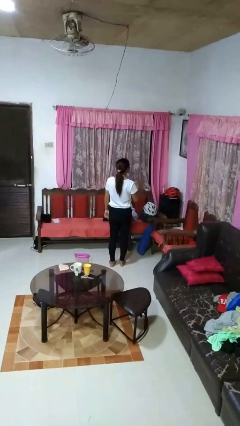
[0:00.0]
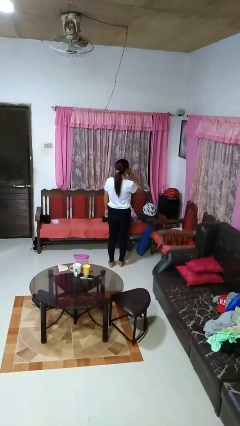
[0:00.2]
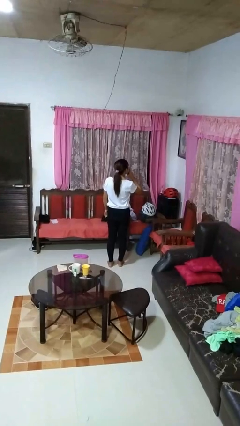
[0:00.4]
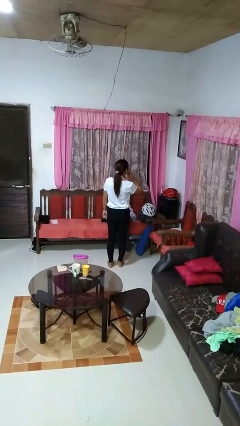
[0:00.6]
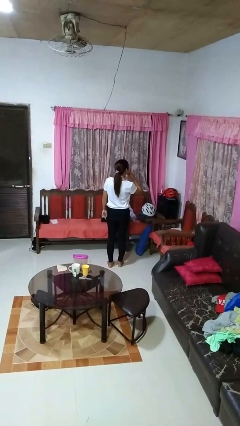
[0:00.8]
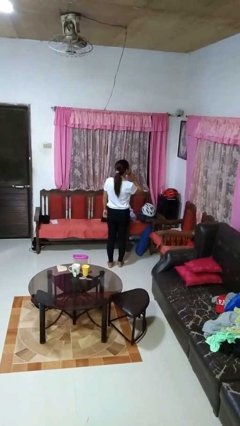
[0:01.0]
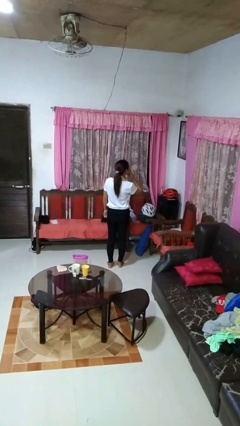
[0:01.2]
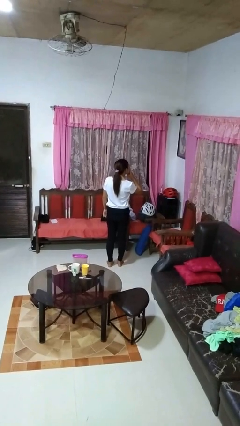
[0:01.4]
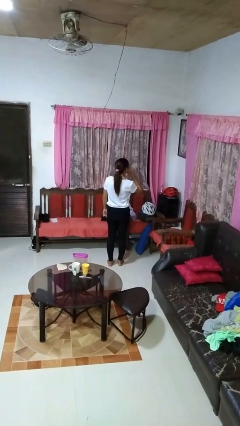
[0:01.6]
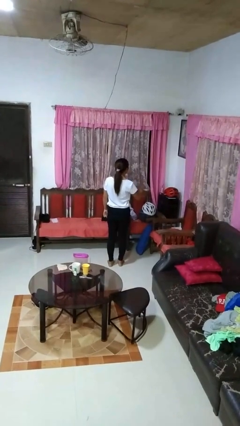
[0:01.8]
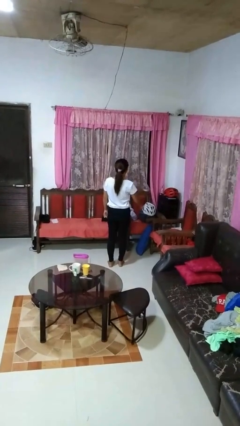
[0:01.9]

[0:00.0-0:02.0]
person gestures be quiet

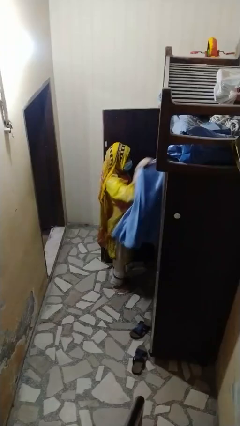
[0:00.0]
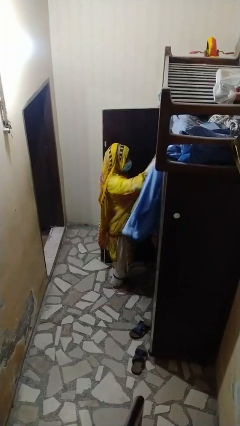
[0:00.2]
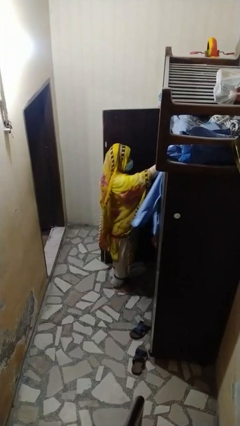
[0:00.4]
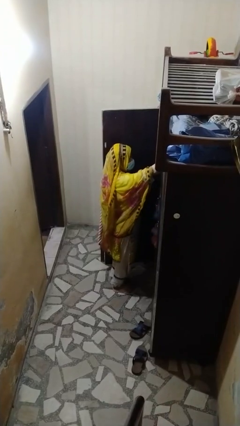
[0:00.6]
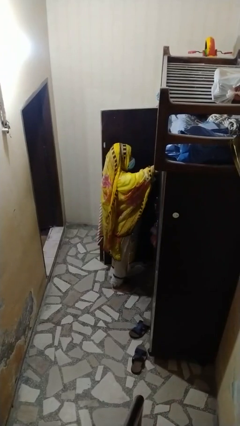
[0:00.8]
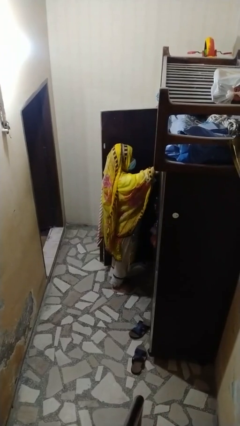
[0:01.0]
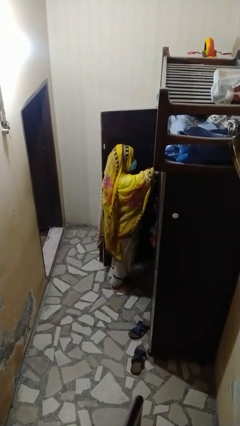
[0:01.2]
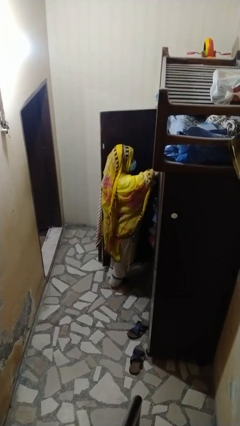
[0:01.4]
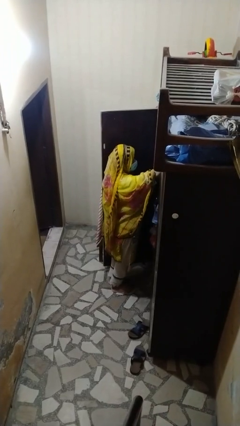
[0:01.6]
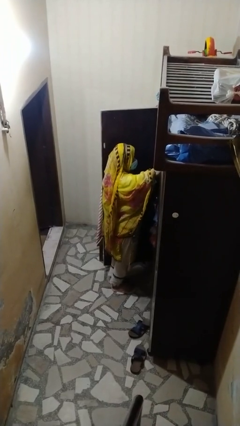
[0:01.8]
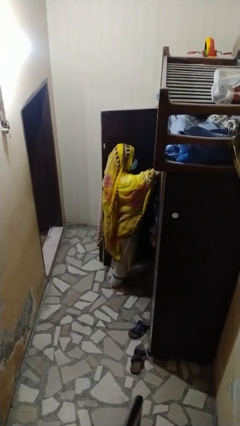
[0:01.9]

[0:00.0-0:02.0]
person puts clothes into closet

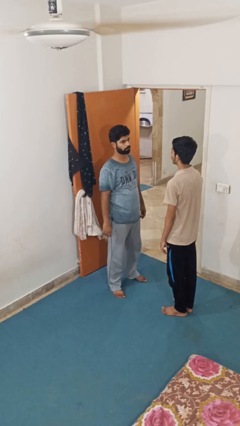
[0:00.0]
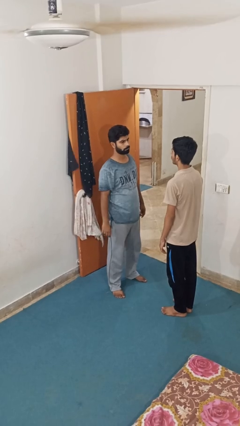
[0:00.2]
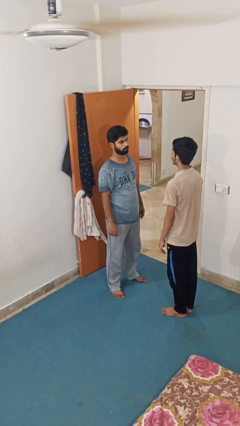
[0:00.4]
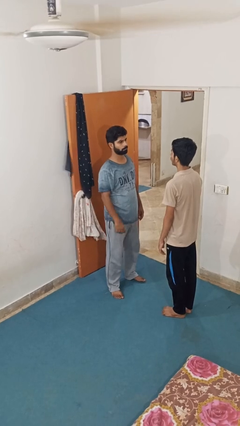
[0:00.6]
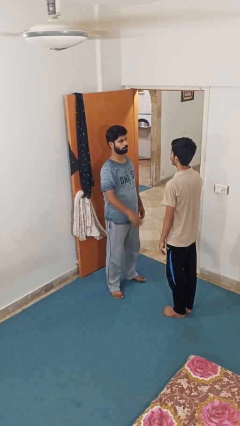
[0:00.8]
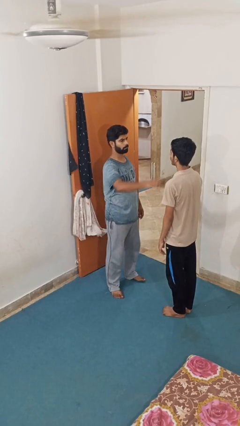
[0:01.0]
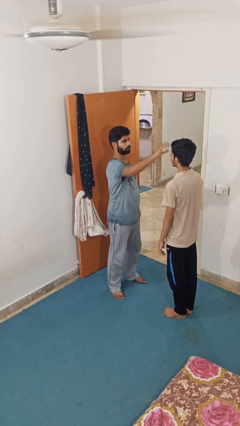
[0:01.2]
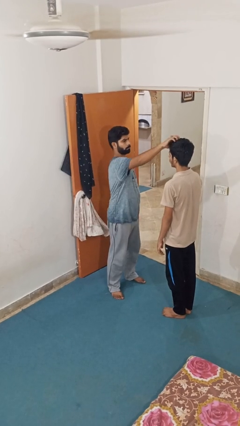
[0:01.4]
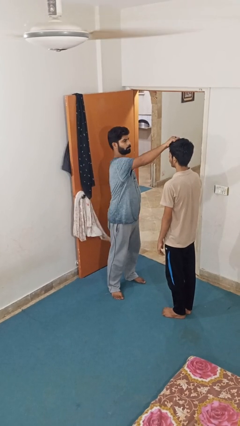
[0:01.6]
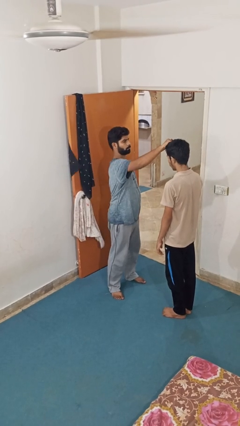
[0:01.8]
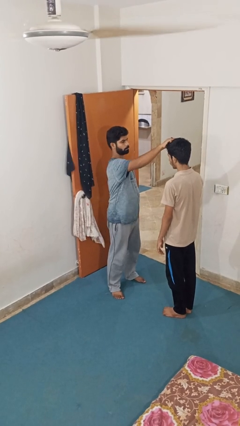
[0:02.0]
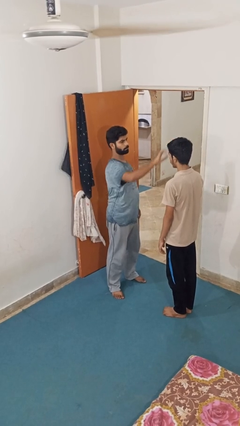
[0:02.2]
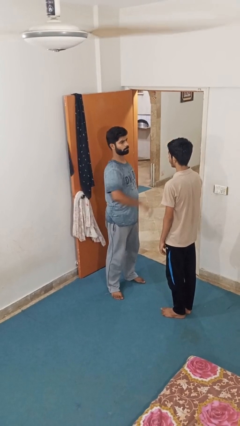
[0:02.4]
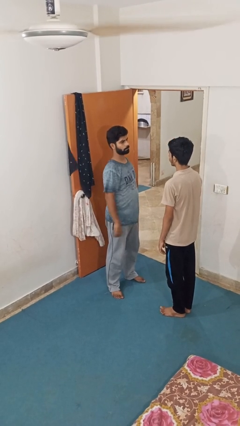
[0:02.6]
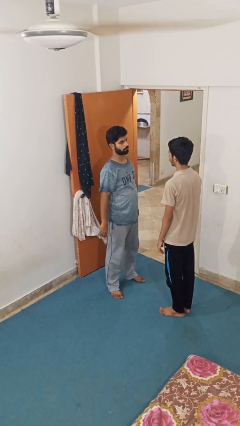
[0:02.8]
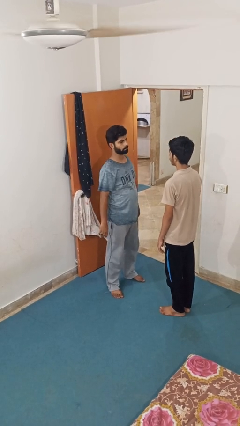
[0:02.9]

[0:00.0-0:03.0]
person grabs person by hair

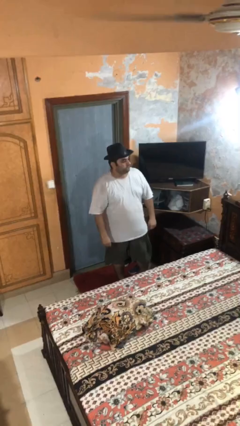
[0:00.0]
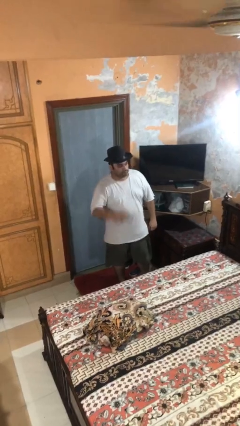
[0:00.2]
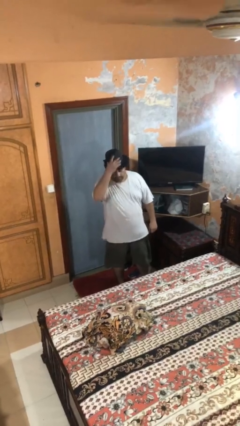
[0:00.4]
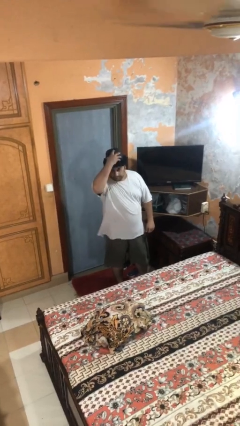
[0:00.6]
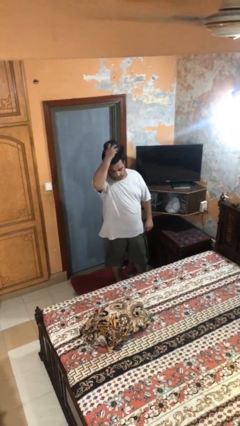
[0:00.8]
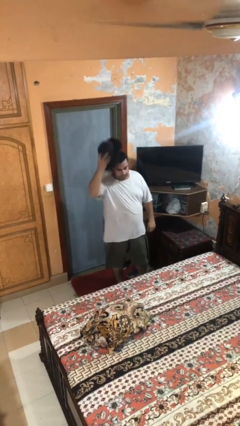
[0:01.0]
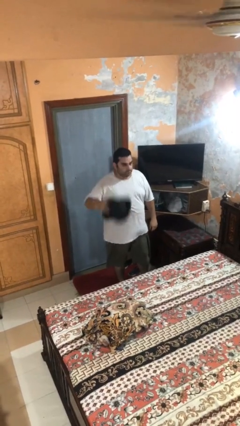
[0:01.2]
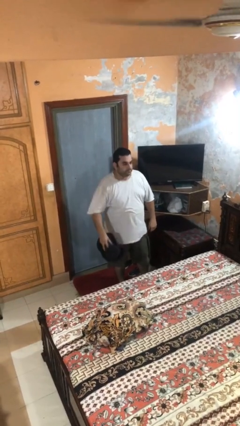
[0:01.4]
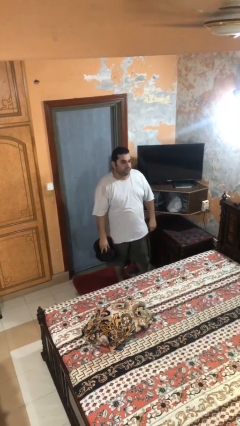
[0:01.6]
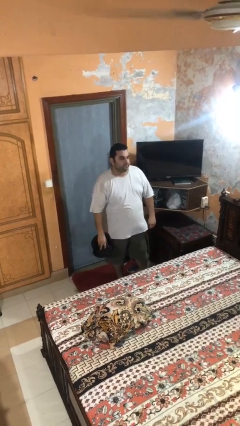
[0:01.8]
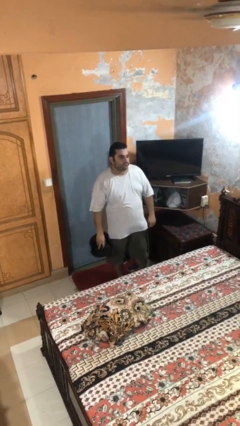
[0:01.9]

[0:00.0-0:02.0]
person takes off hat

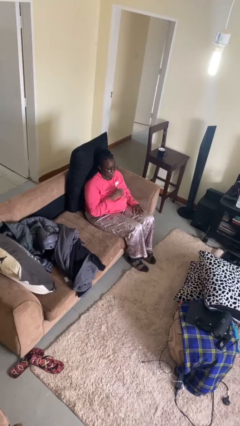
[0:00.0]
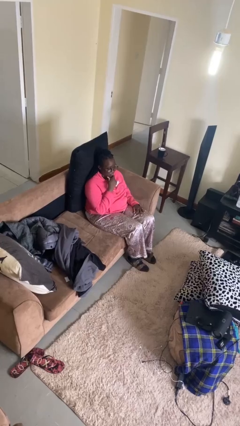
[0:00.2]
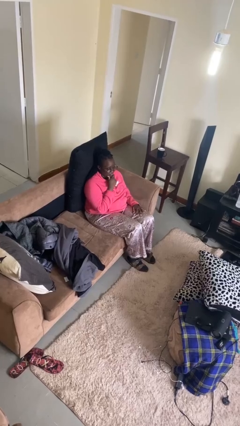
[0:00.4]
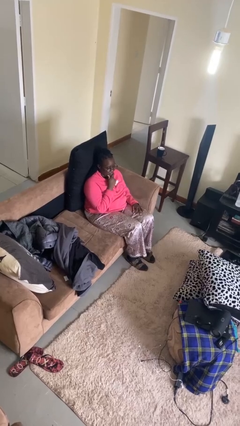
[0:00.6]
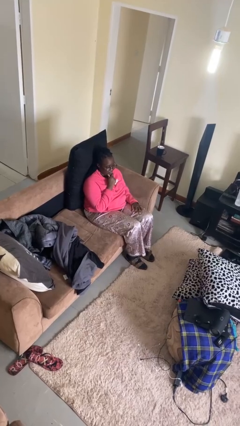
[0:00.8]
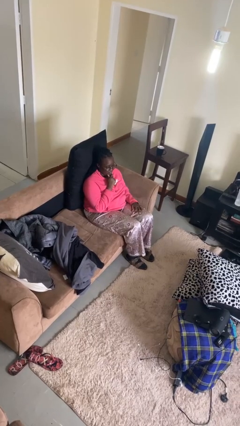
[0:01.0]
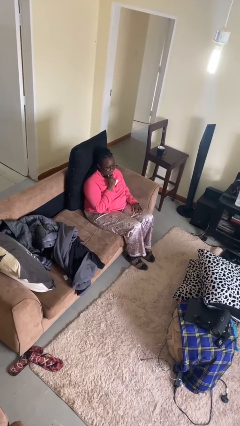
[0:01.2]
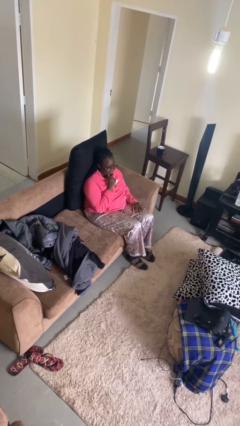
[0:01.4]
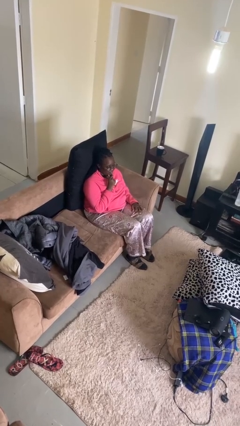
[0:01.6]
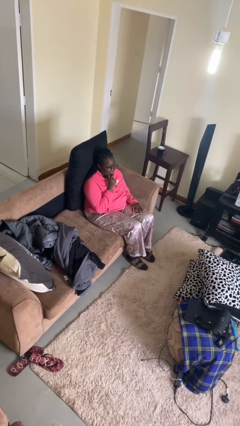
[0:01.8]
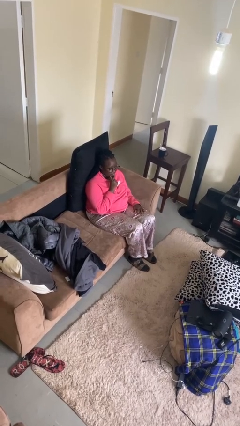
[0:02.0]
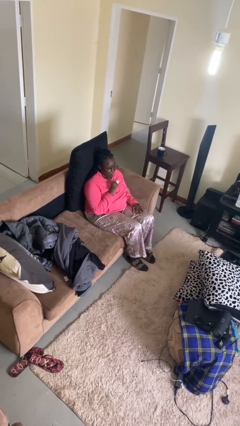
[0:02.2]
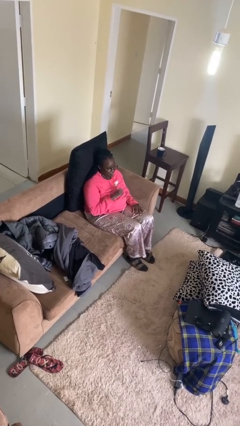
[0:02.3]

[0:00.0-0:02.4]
person strokes chin

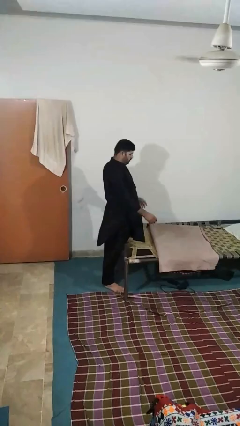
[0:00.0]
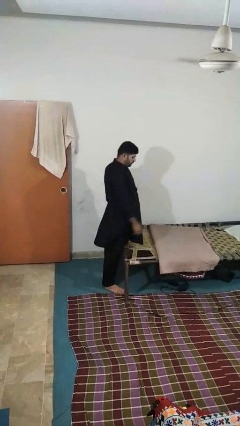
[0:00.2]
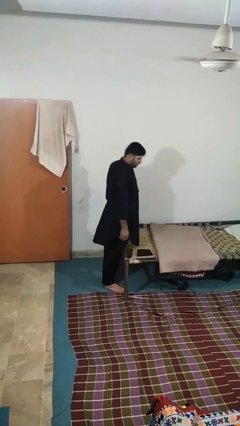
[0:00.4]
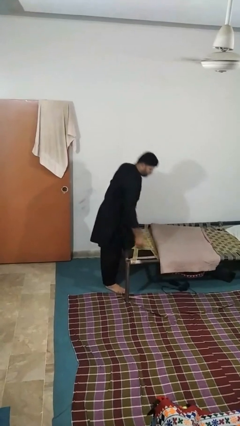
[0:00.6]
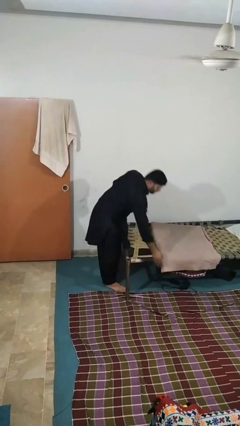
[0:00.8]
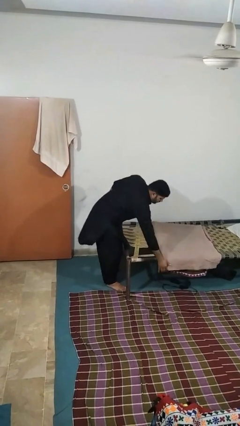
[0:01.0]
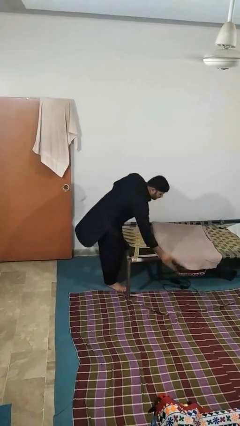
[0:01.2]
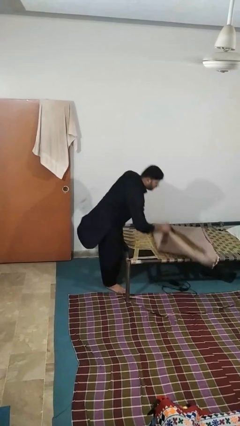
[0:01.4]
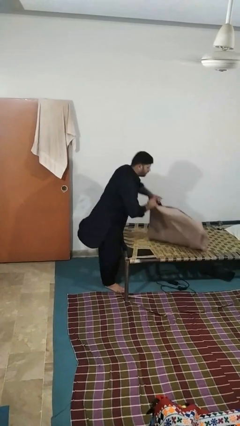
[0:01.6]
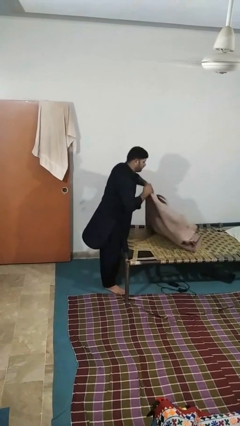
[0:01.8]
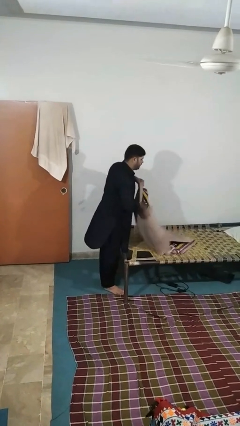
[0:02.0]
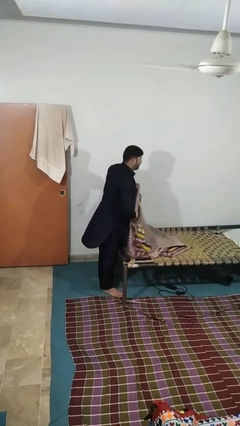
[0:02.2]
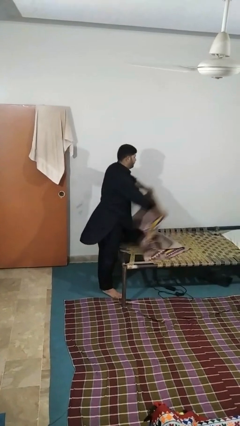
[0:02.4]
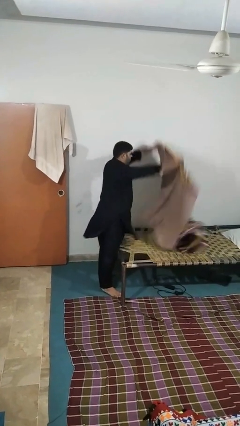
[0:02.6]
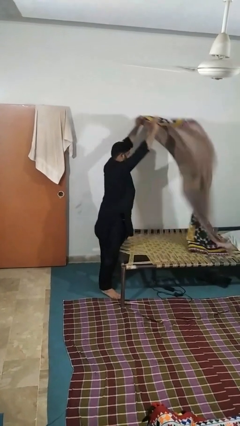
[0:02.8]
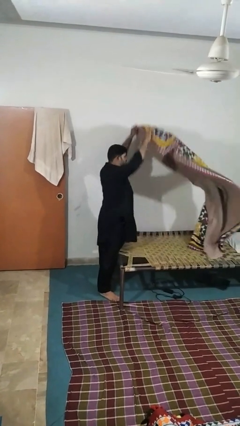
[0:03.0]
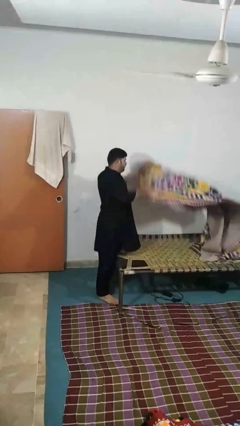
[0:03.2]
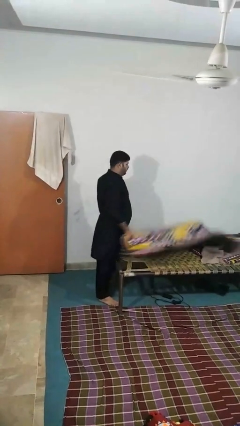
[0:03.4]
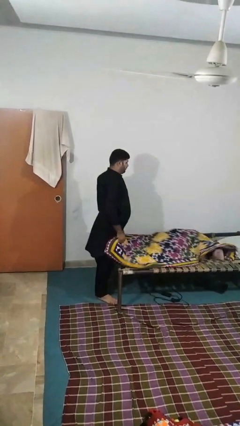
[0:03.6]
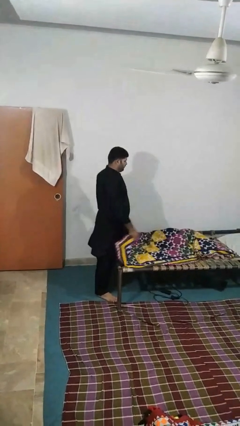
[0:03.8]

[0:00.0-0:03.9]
person unfolds blanket

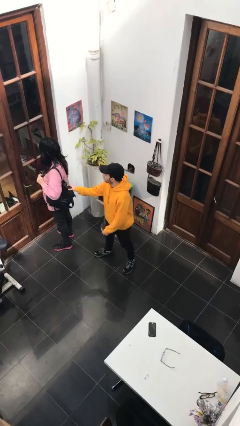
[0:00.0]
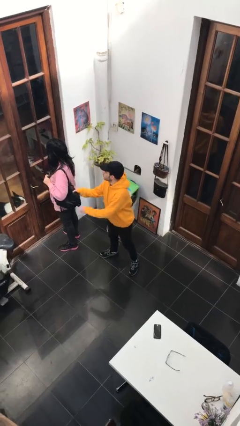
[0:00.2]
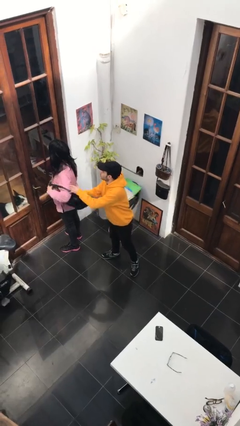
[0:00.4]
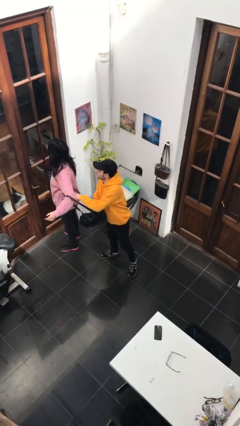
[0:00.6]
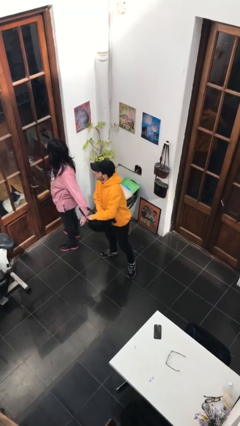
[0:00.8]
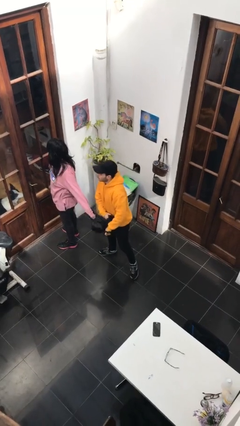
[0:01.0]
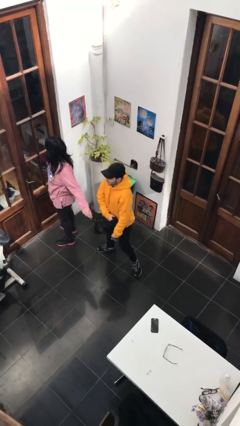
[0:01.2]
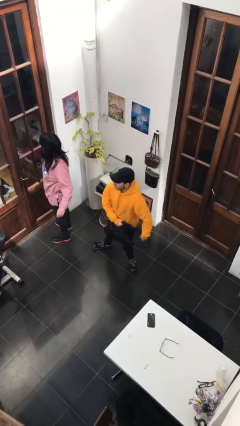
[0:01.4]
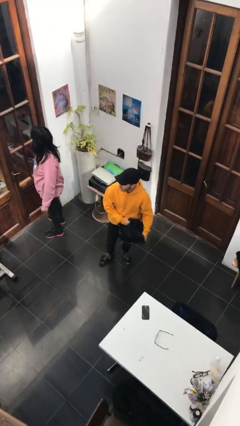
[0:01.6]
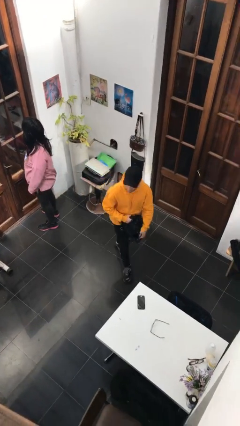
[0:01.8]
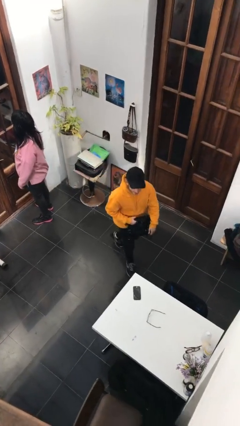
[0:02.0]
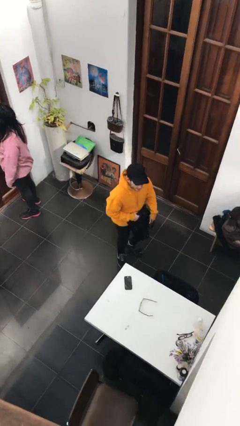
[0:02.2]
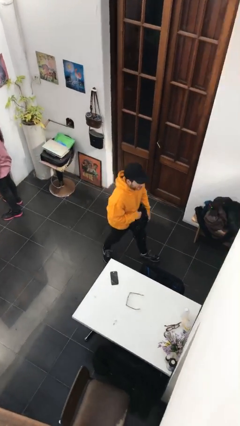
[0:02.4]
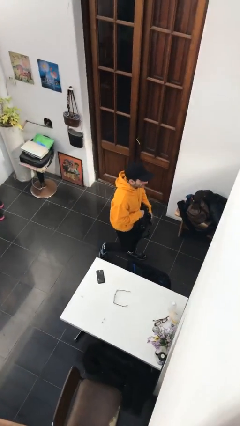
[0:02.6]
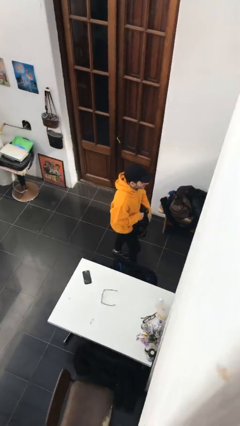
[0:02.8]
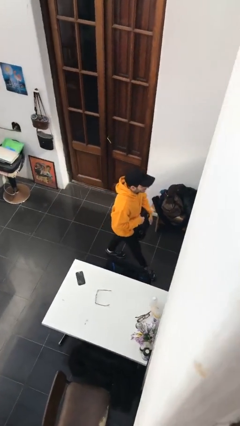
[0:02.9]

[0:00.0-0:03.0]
person steals object from person
